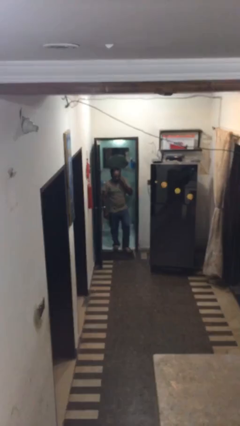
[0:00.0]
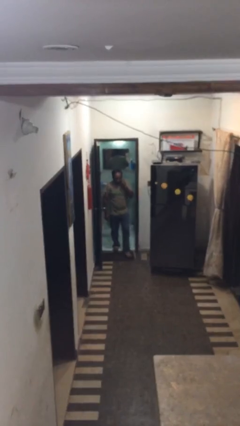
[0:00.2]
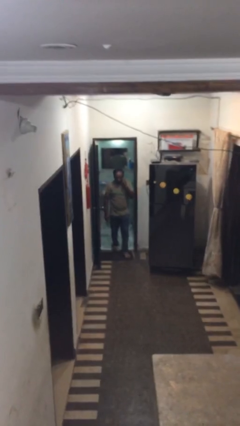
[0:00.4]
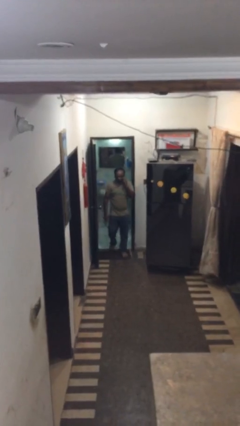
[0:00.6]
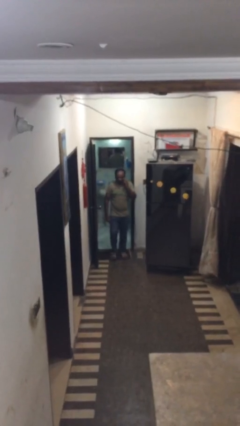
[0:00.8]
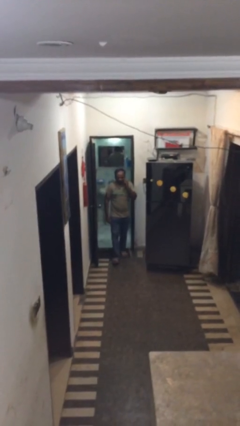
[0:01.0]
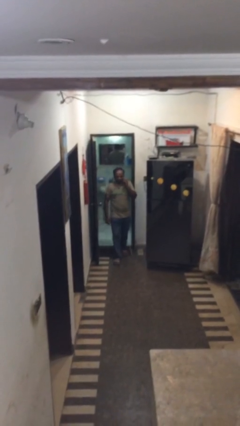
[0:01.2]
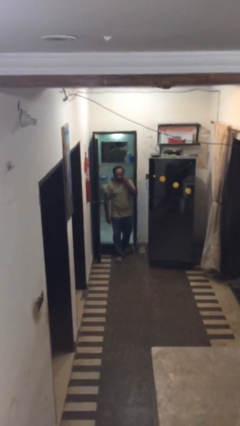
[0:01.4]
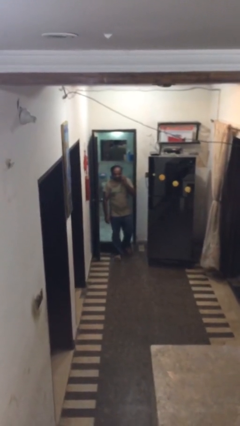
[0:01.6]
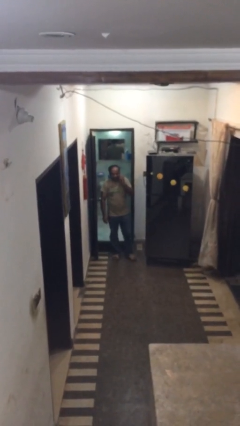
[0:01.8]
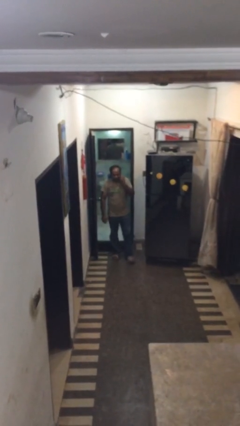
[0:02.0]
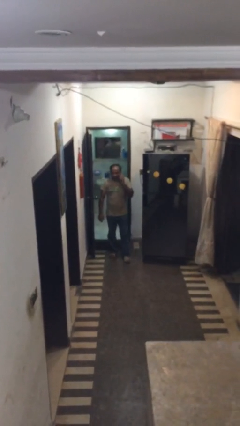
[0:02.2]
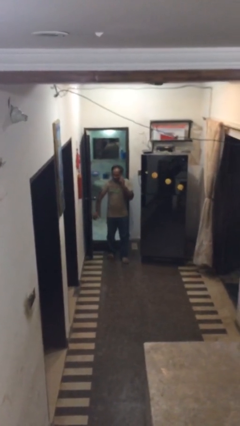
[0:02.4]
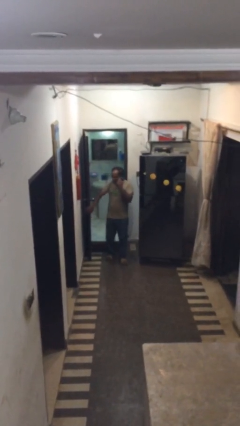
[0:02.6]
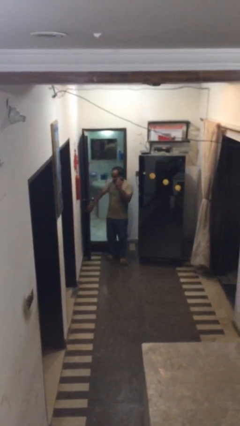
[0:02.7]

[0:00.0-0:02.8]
person enters scene through structure

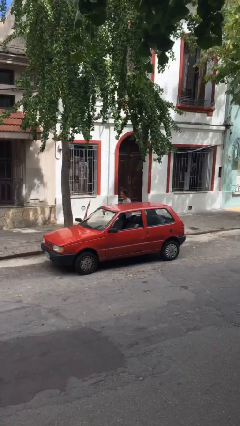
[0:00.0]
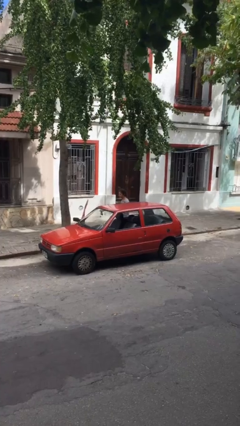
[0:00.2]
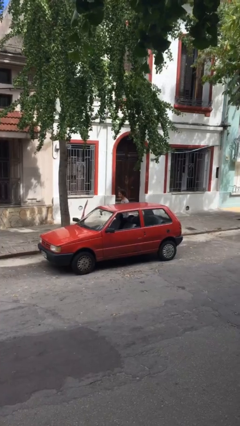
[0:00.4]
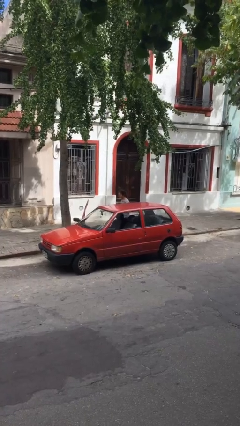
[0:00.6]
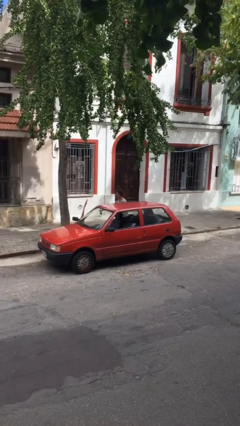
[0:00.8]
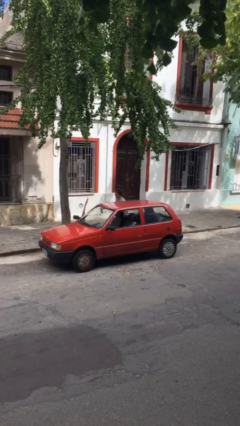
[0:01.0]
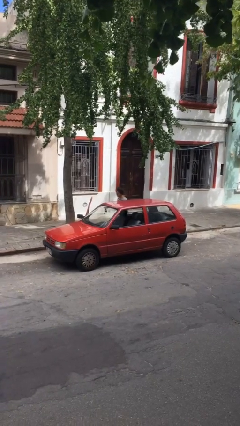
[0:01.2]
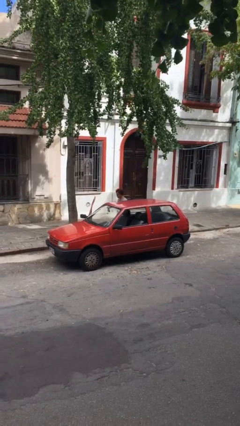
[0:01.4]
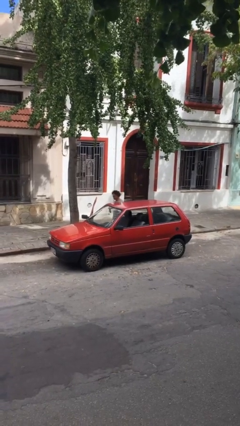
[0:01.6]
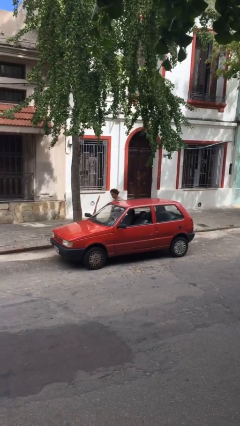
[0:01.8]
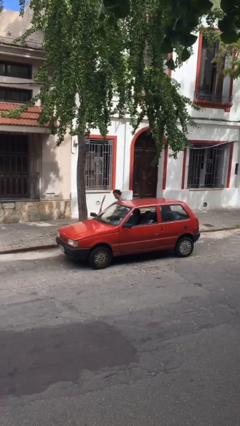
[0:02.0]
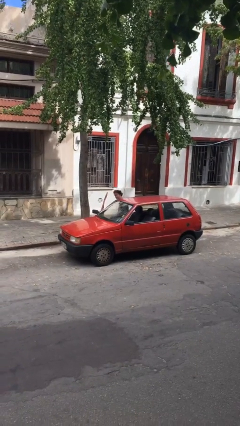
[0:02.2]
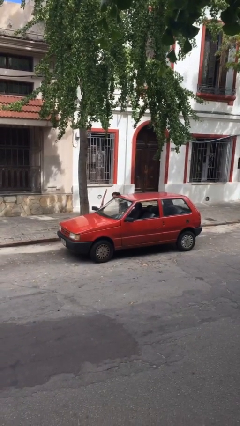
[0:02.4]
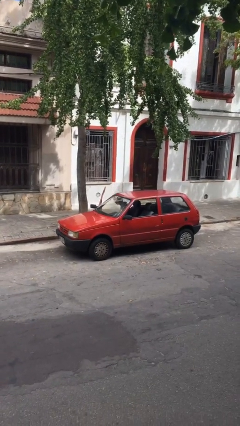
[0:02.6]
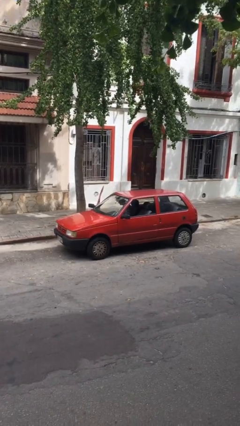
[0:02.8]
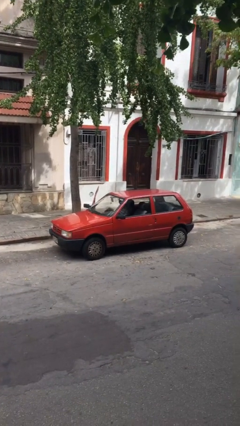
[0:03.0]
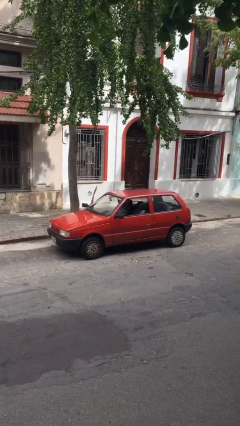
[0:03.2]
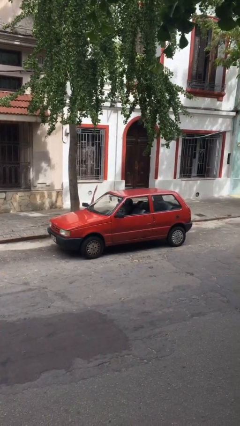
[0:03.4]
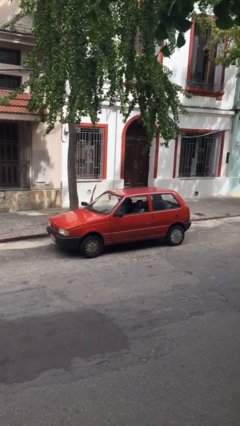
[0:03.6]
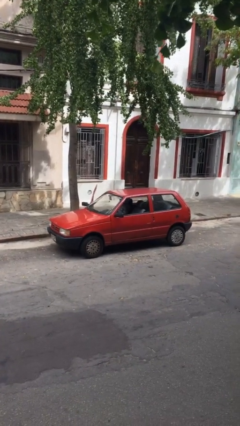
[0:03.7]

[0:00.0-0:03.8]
person enters car

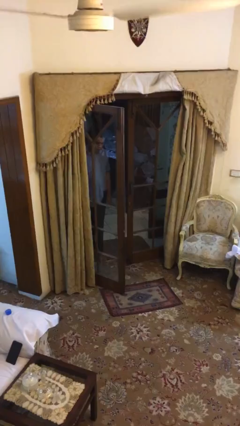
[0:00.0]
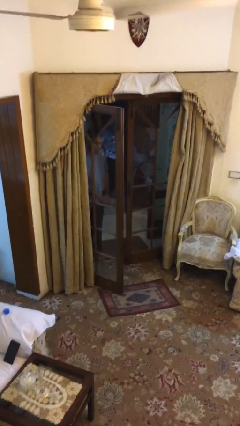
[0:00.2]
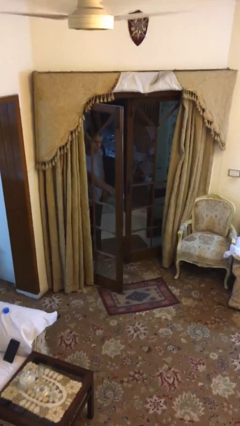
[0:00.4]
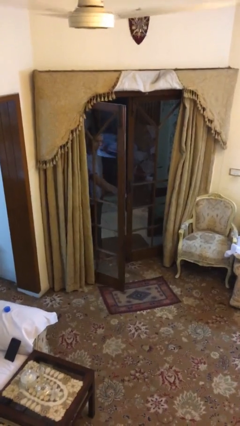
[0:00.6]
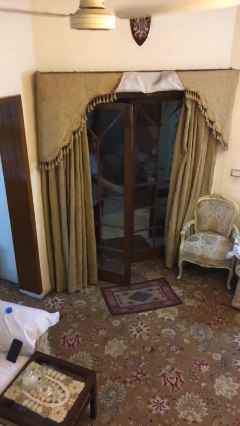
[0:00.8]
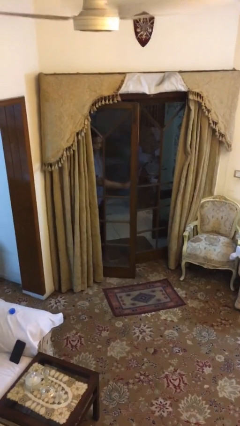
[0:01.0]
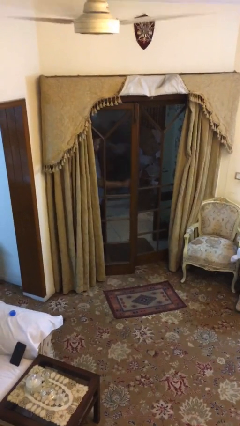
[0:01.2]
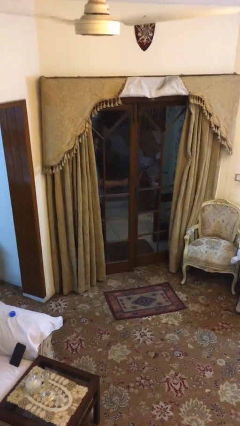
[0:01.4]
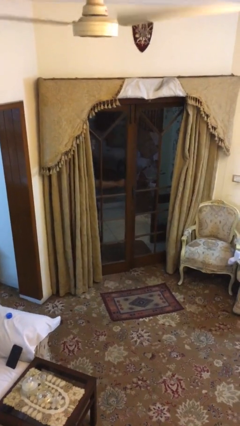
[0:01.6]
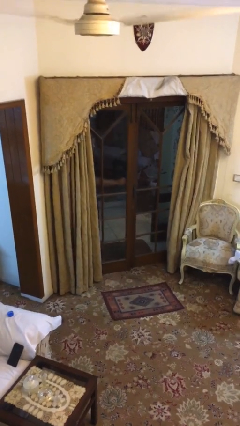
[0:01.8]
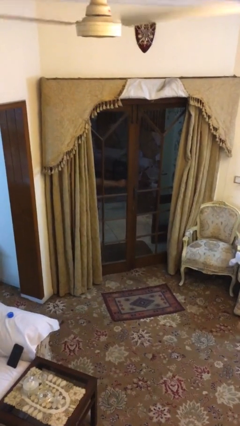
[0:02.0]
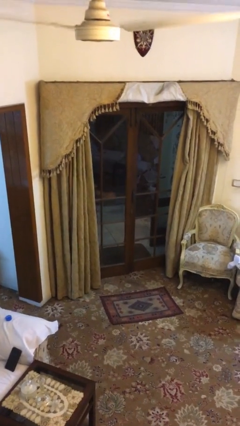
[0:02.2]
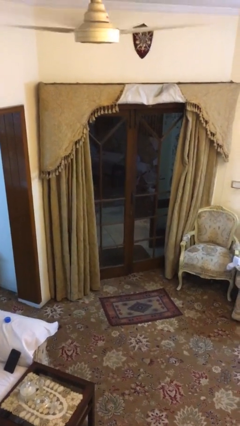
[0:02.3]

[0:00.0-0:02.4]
person closes facility door

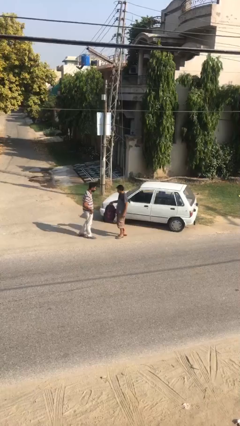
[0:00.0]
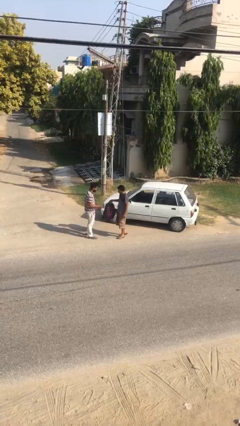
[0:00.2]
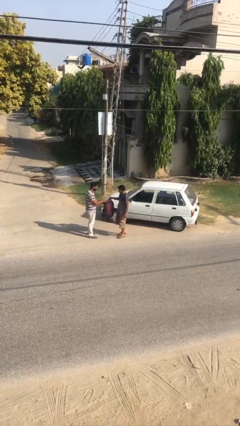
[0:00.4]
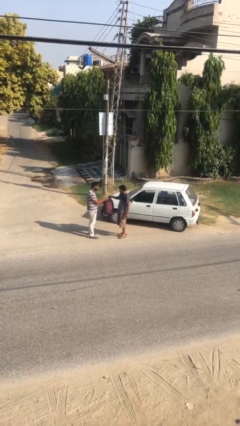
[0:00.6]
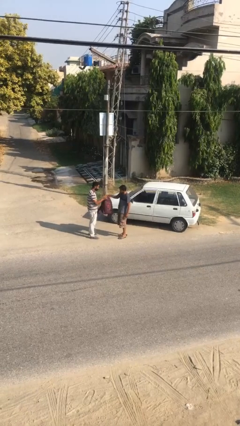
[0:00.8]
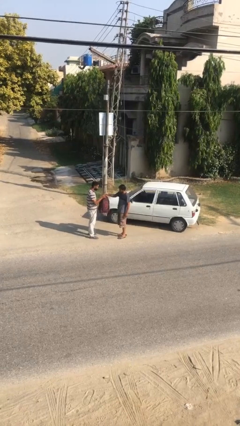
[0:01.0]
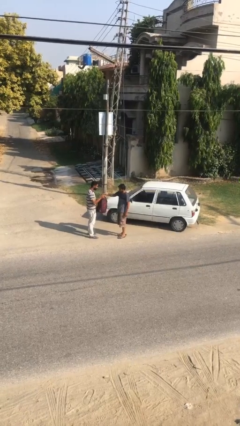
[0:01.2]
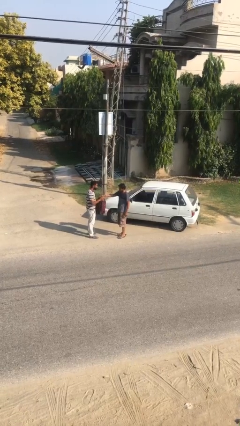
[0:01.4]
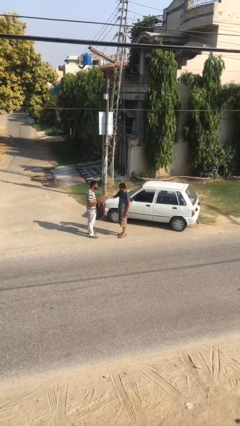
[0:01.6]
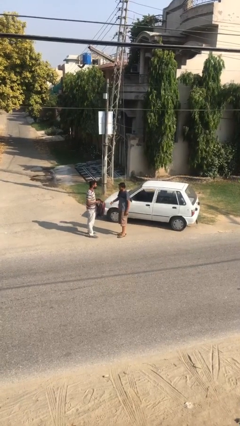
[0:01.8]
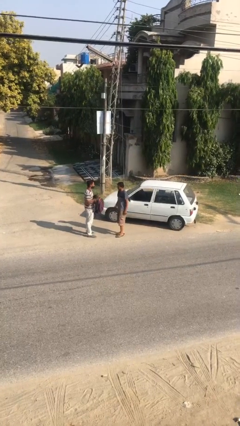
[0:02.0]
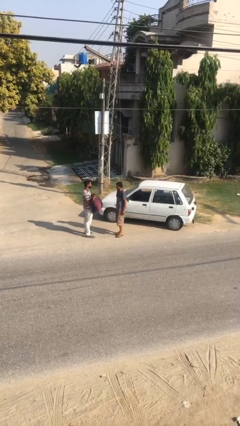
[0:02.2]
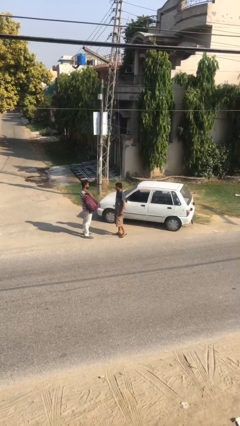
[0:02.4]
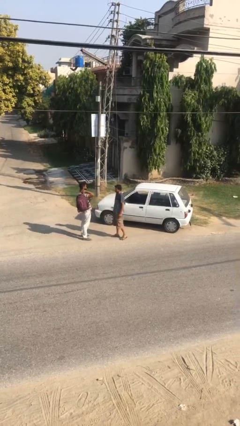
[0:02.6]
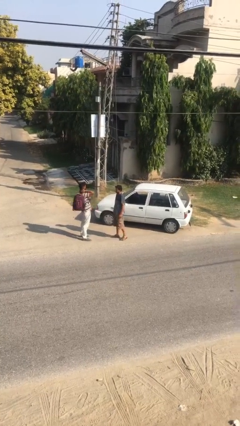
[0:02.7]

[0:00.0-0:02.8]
person transfers object to person

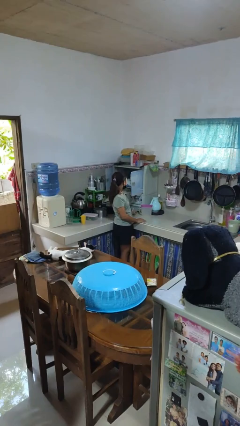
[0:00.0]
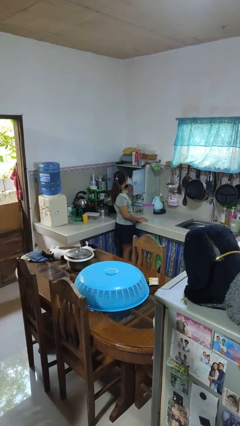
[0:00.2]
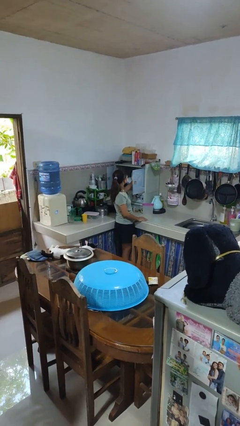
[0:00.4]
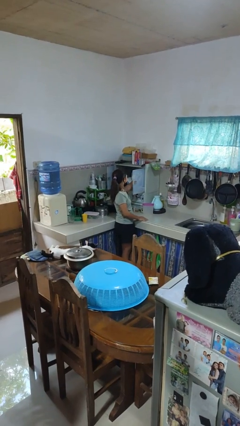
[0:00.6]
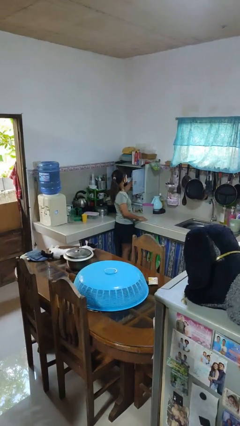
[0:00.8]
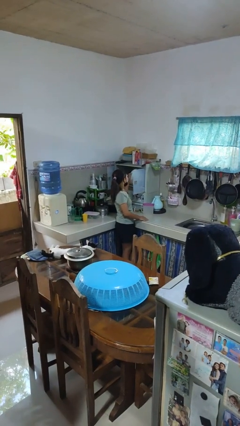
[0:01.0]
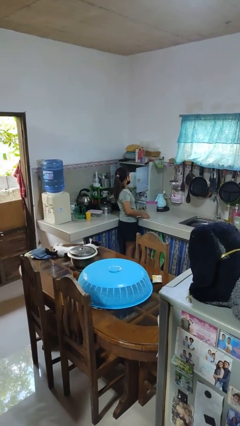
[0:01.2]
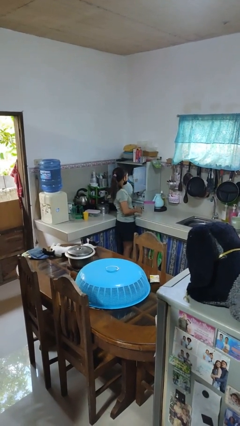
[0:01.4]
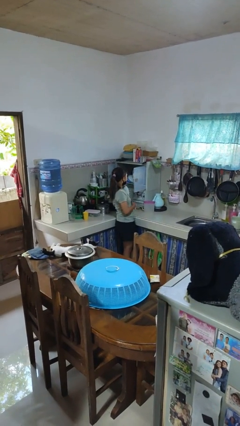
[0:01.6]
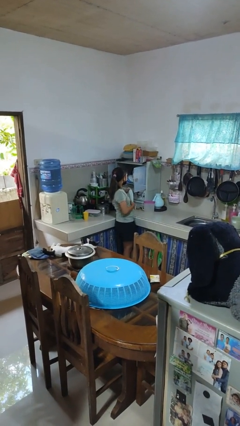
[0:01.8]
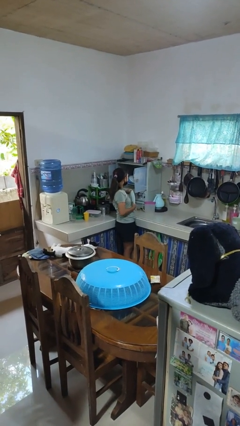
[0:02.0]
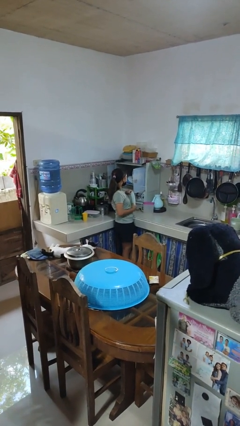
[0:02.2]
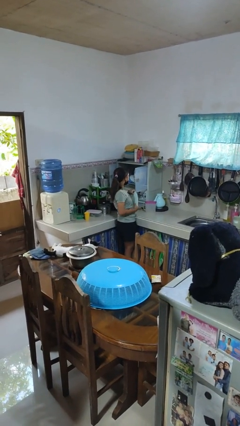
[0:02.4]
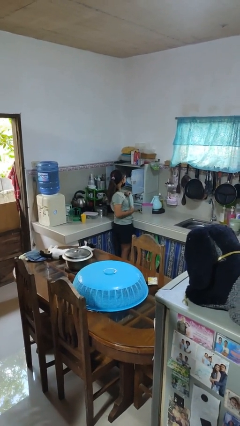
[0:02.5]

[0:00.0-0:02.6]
person takes object from kitchen drawer

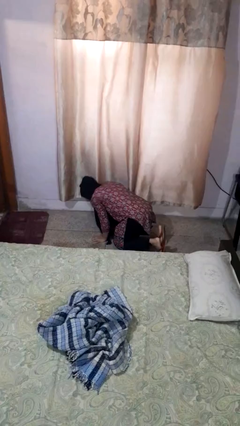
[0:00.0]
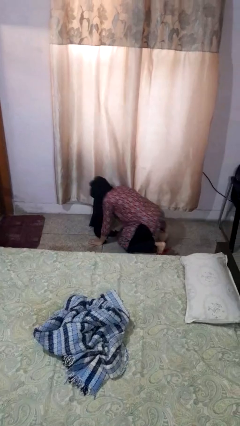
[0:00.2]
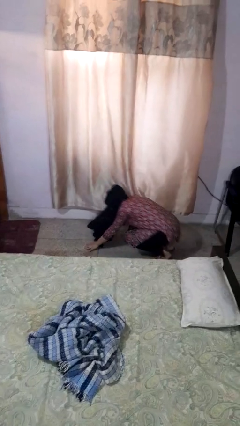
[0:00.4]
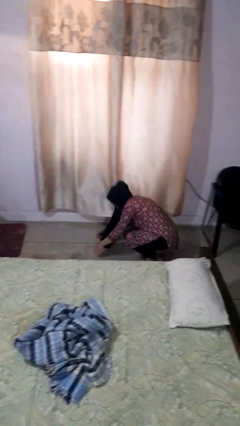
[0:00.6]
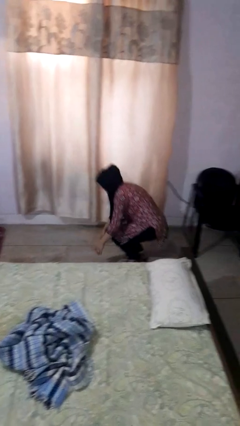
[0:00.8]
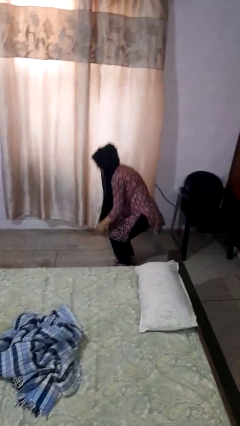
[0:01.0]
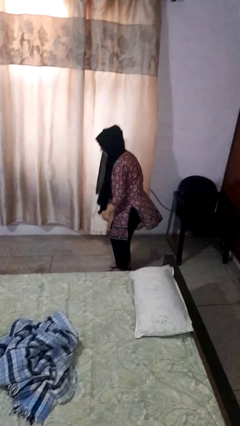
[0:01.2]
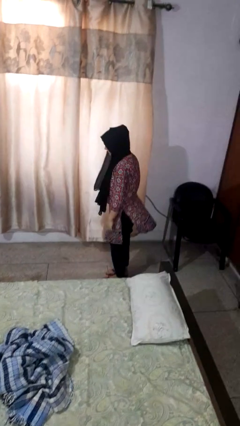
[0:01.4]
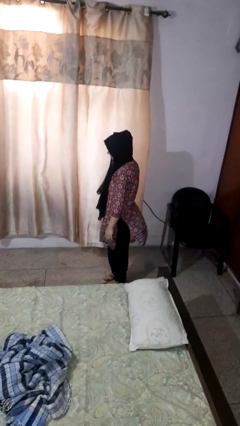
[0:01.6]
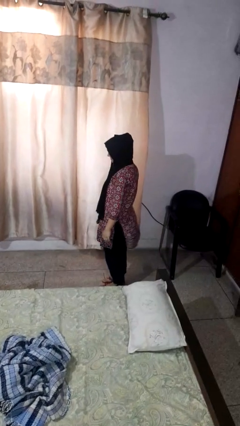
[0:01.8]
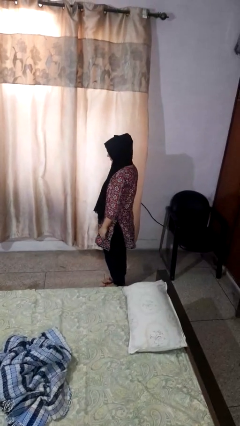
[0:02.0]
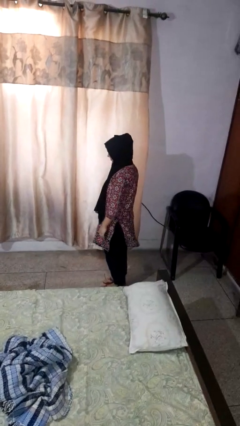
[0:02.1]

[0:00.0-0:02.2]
person stands up from floor

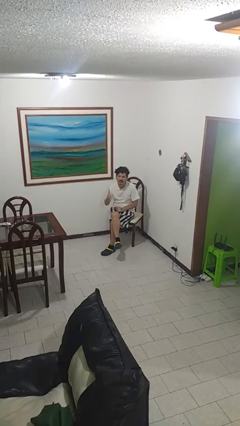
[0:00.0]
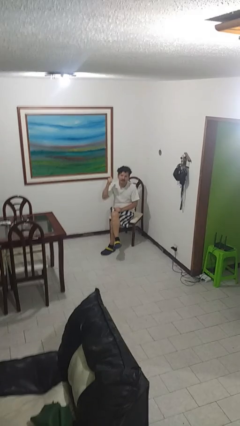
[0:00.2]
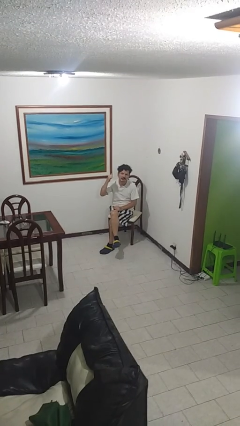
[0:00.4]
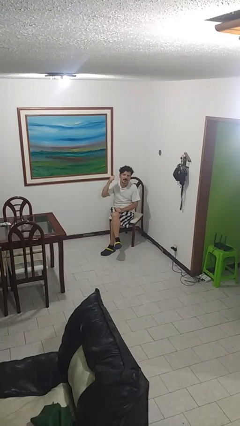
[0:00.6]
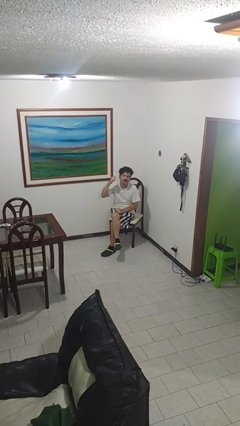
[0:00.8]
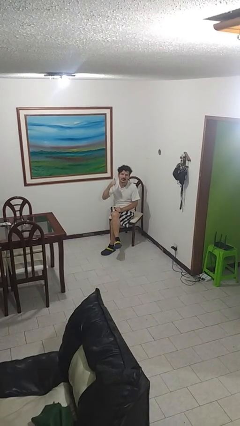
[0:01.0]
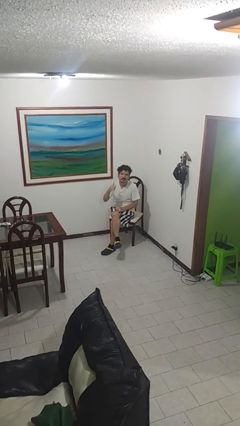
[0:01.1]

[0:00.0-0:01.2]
person gestures behind me
